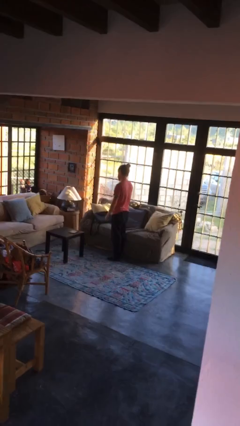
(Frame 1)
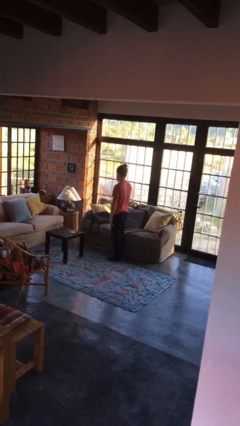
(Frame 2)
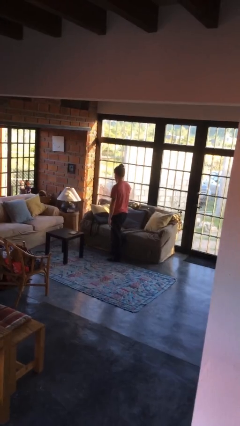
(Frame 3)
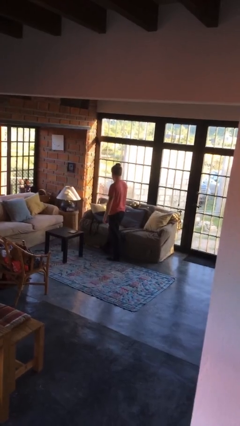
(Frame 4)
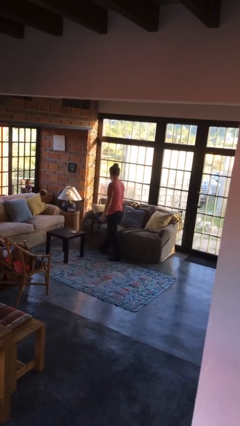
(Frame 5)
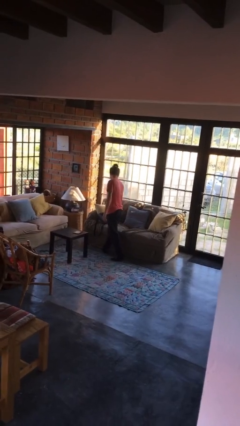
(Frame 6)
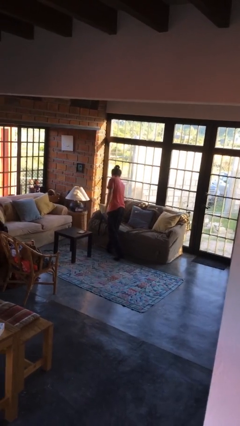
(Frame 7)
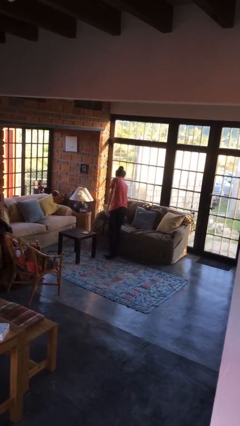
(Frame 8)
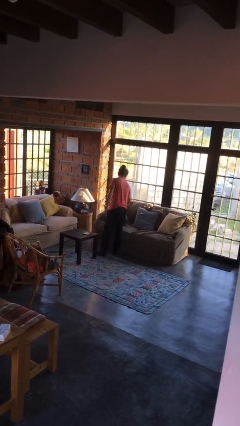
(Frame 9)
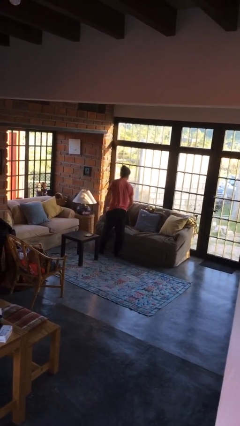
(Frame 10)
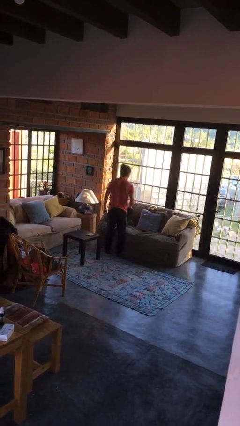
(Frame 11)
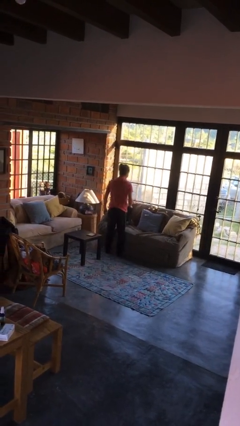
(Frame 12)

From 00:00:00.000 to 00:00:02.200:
person picks up object from couch

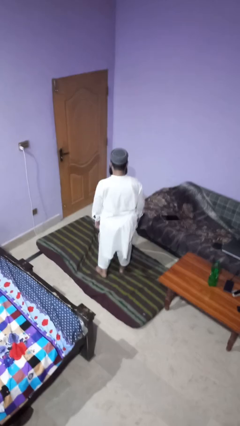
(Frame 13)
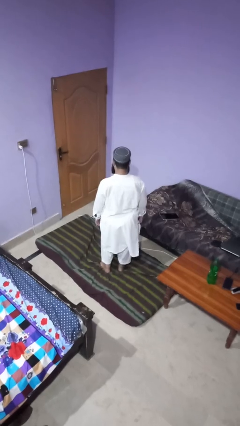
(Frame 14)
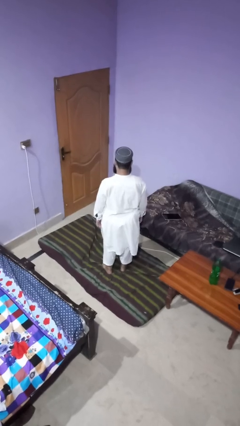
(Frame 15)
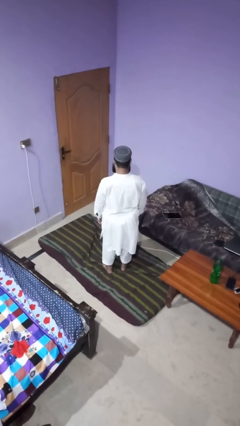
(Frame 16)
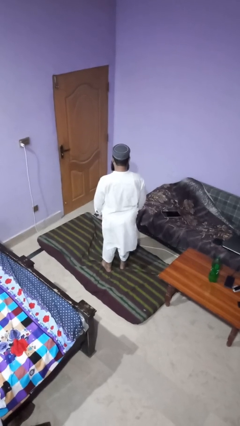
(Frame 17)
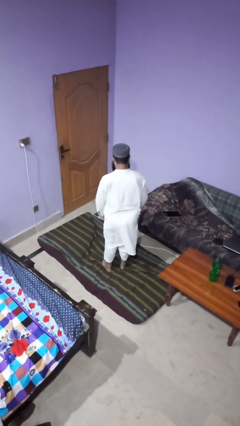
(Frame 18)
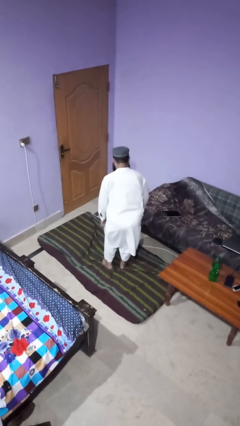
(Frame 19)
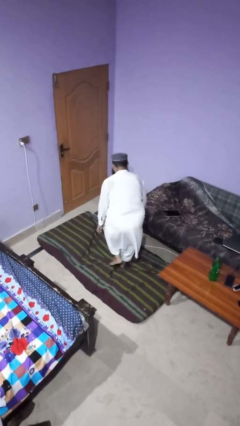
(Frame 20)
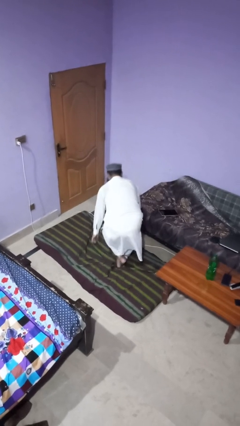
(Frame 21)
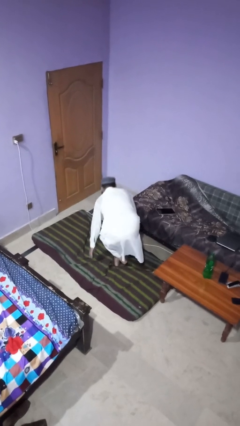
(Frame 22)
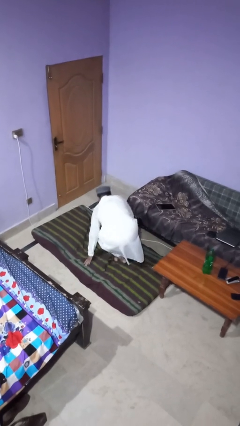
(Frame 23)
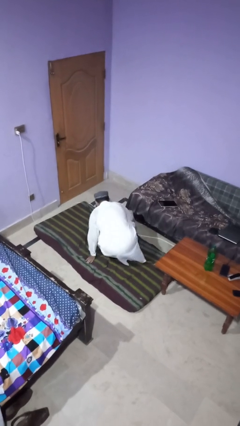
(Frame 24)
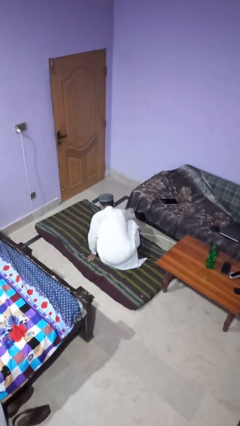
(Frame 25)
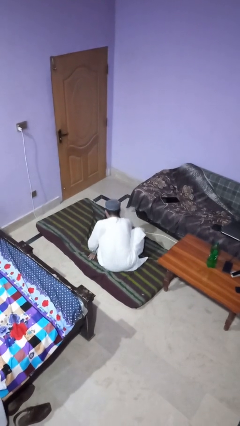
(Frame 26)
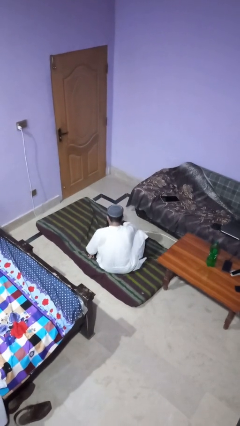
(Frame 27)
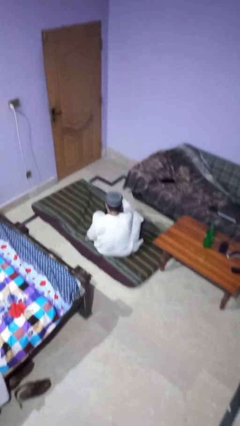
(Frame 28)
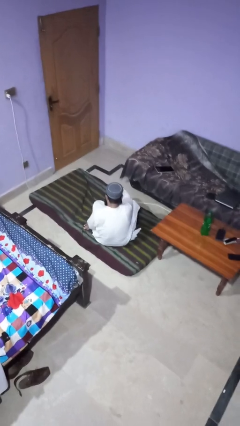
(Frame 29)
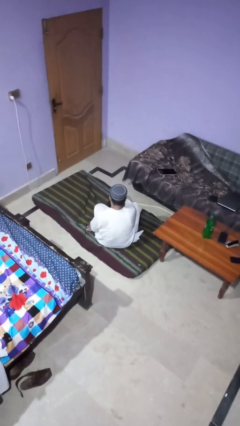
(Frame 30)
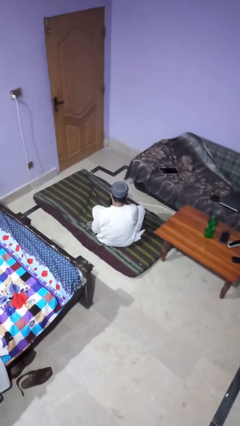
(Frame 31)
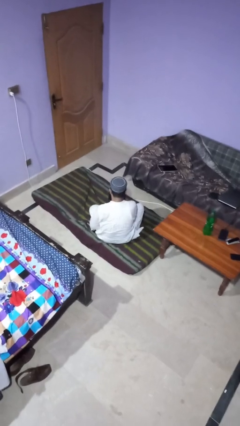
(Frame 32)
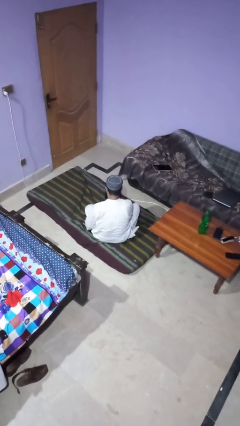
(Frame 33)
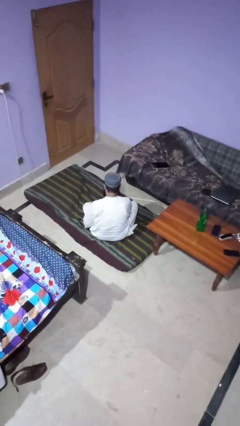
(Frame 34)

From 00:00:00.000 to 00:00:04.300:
person sits crisscross

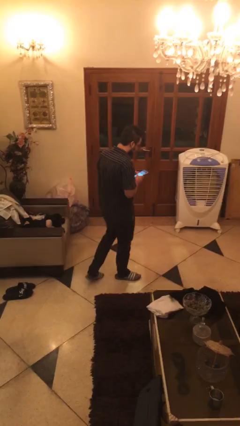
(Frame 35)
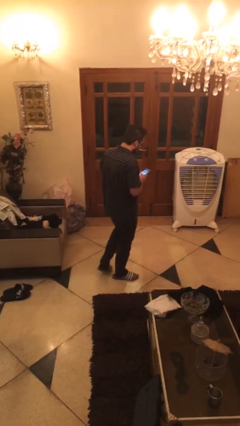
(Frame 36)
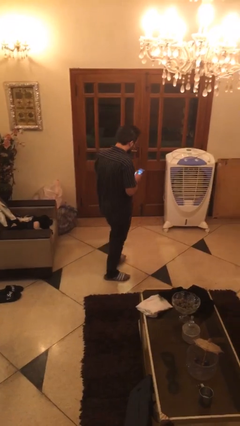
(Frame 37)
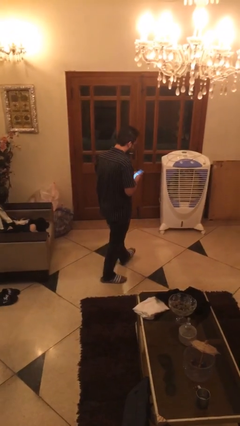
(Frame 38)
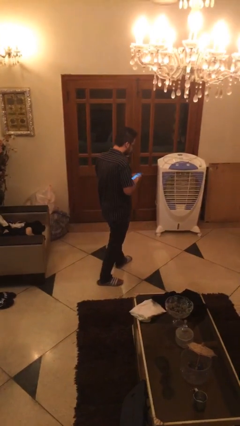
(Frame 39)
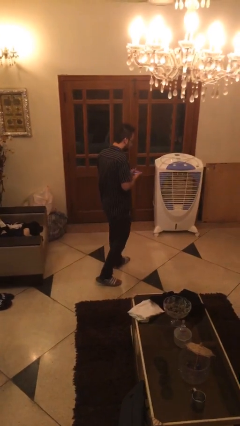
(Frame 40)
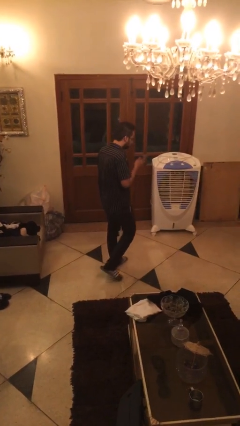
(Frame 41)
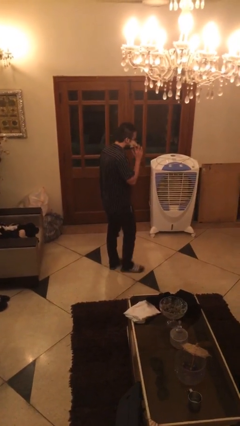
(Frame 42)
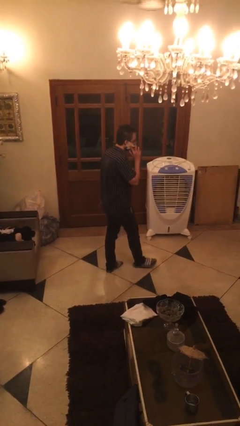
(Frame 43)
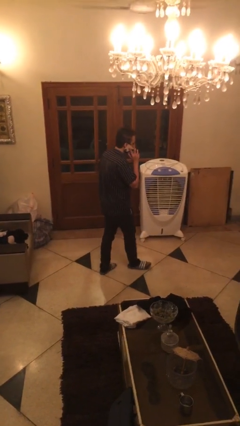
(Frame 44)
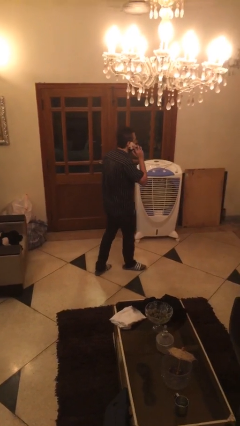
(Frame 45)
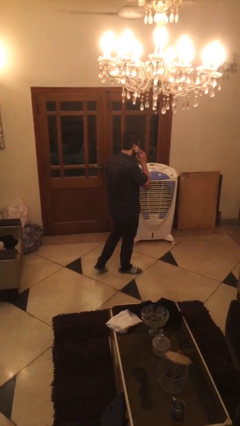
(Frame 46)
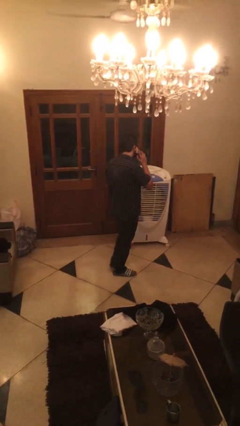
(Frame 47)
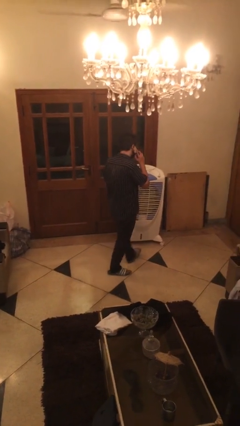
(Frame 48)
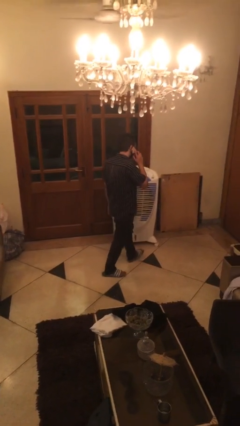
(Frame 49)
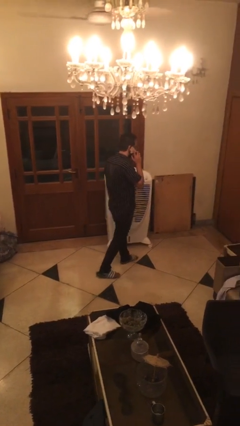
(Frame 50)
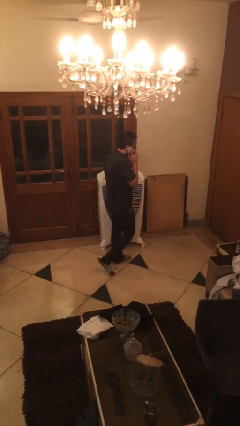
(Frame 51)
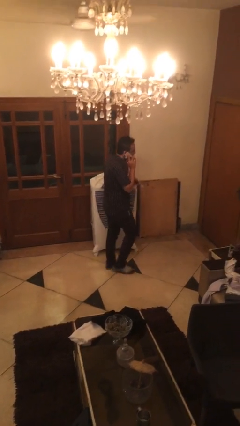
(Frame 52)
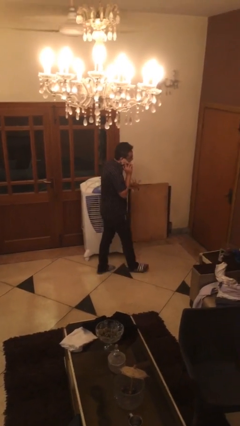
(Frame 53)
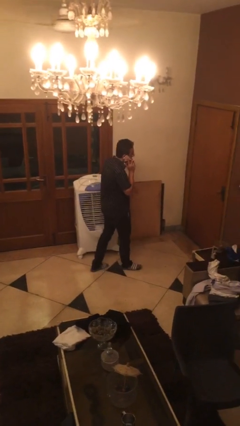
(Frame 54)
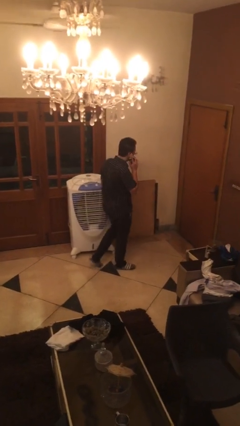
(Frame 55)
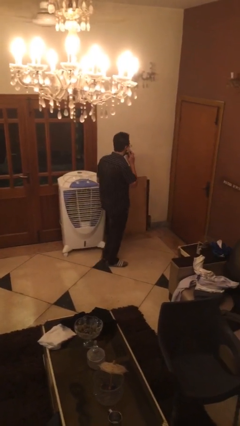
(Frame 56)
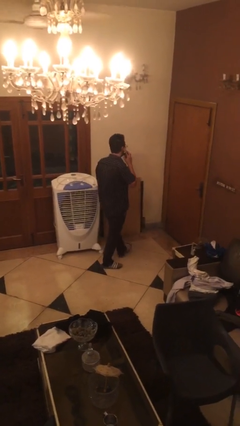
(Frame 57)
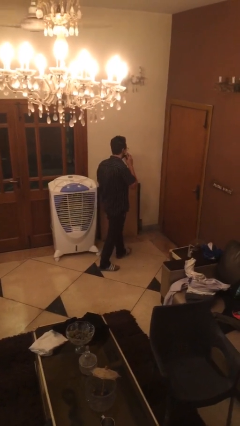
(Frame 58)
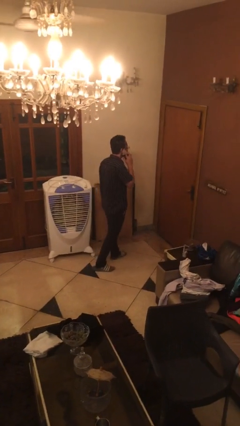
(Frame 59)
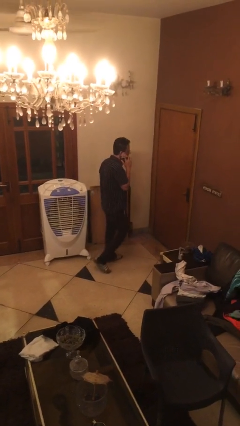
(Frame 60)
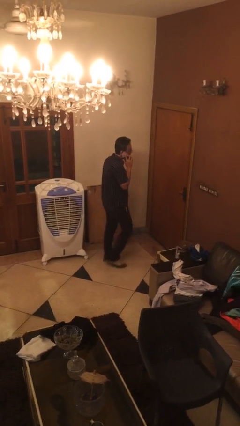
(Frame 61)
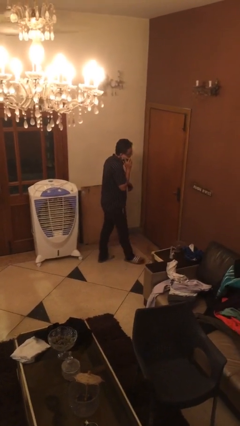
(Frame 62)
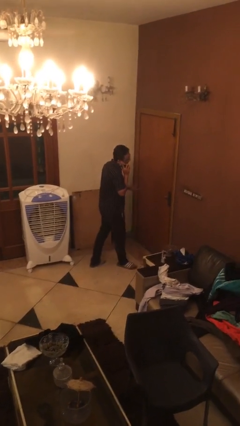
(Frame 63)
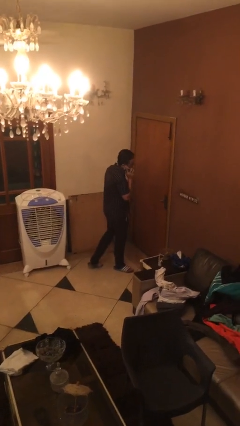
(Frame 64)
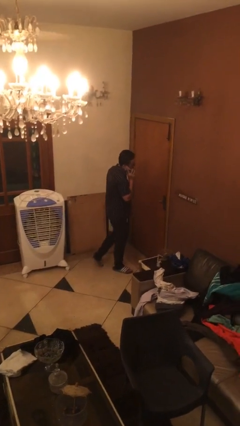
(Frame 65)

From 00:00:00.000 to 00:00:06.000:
person talks on phone

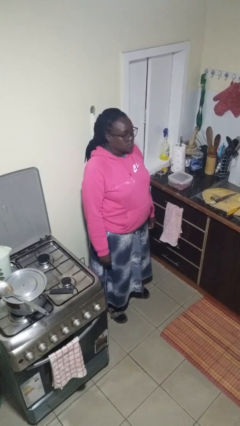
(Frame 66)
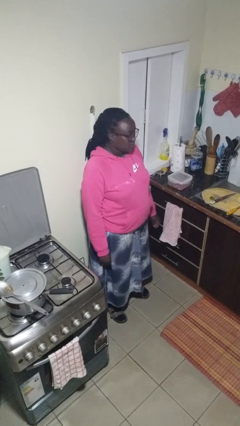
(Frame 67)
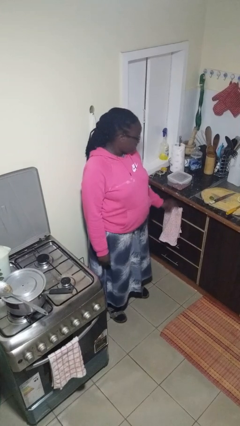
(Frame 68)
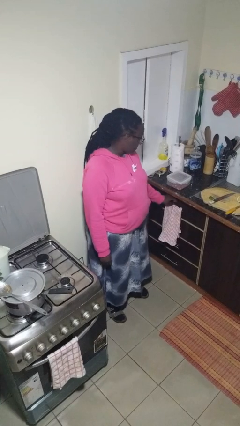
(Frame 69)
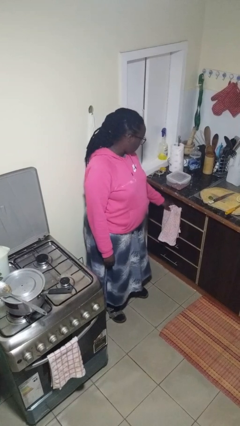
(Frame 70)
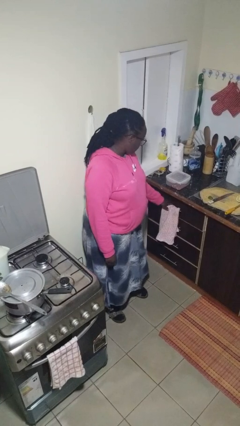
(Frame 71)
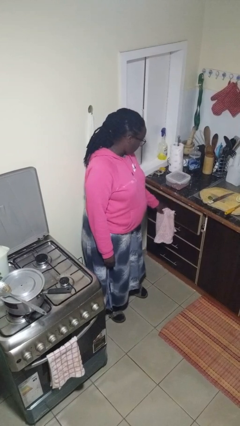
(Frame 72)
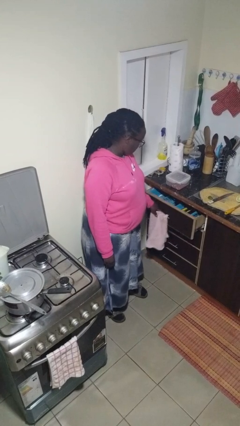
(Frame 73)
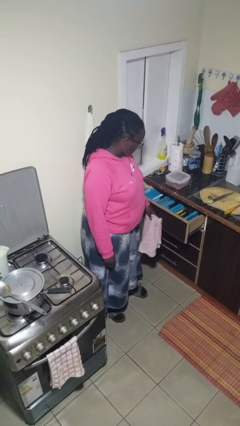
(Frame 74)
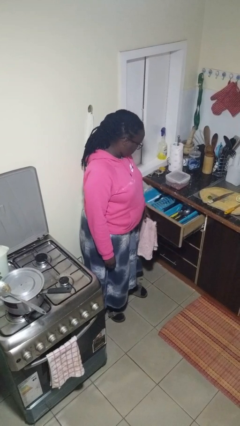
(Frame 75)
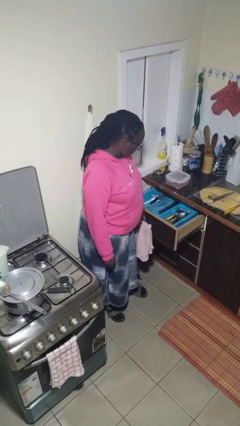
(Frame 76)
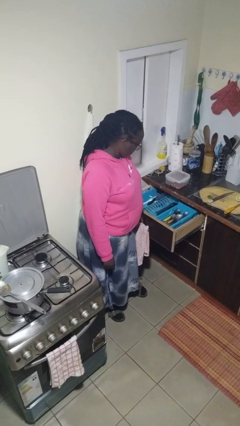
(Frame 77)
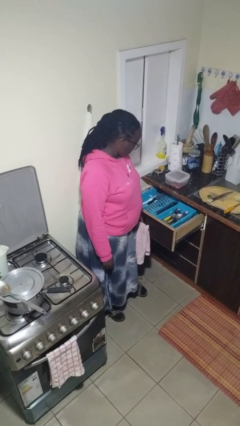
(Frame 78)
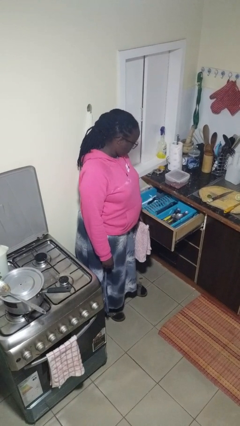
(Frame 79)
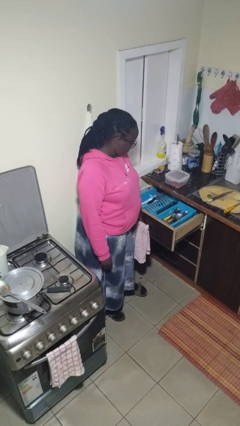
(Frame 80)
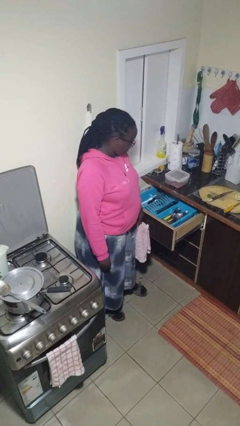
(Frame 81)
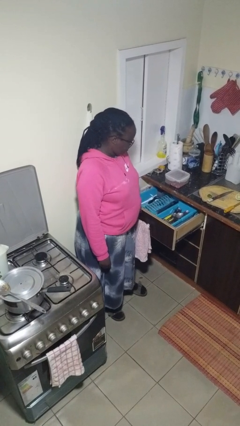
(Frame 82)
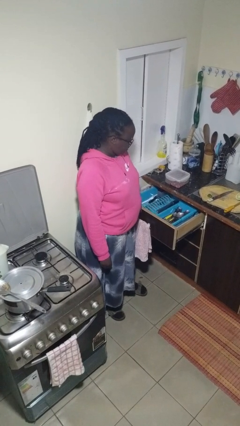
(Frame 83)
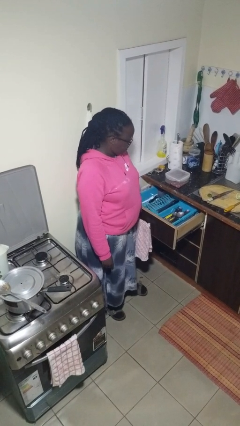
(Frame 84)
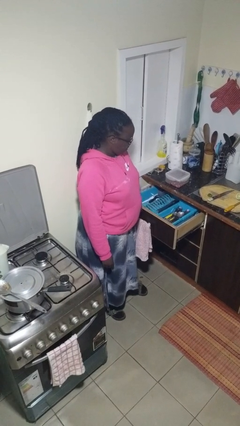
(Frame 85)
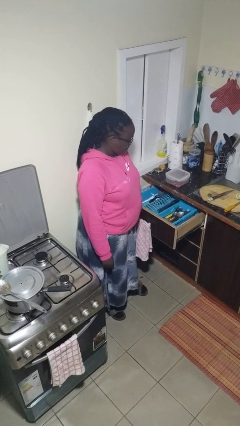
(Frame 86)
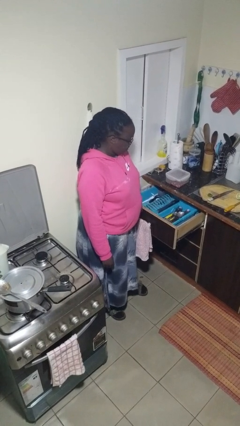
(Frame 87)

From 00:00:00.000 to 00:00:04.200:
person opens kitchen drawer

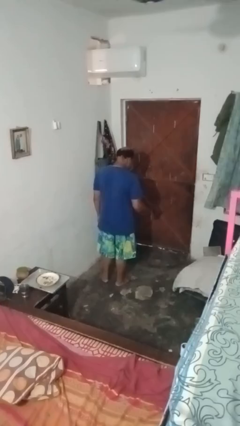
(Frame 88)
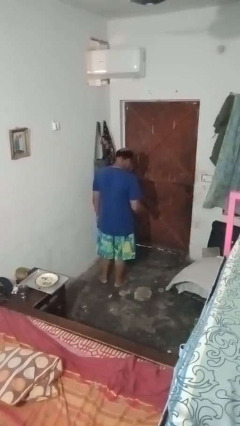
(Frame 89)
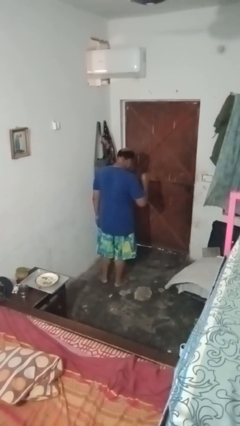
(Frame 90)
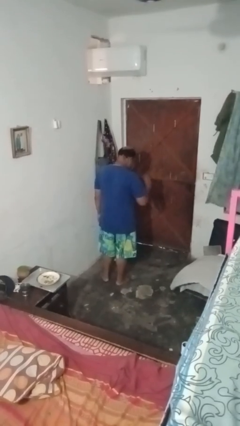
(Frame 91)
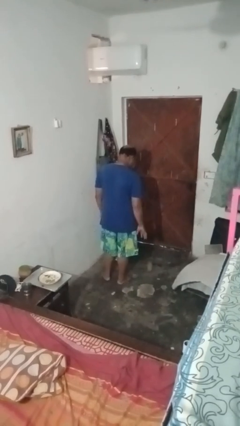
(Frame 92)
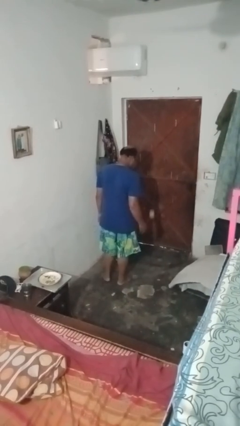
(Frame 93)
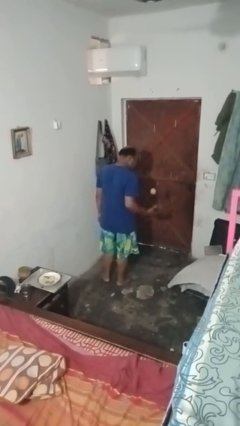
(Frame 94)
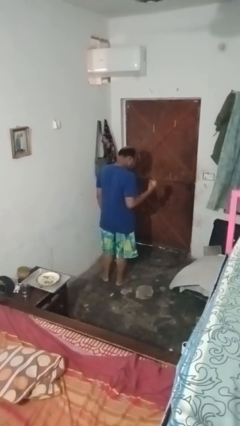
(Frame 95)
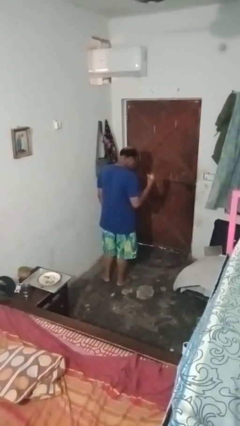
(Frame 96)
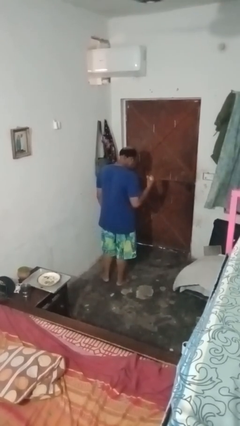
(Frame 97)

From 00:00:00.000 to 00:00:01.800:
person bounces ball on floor
